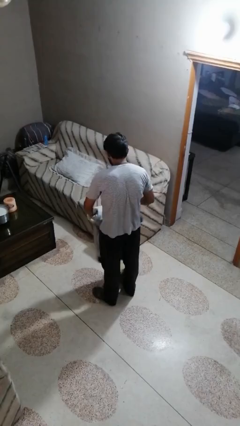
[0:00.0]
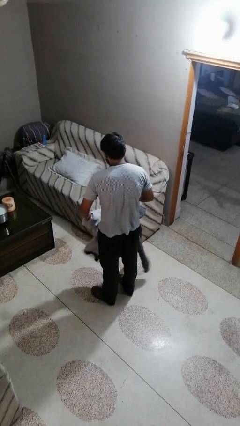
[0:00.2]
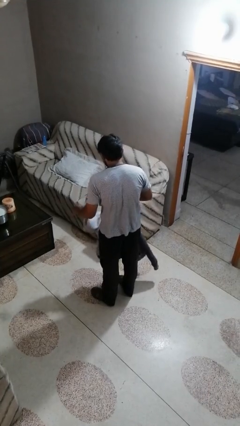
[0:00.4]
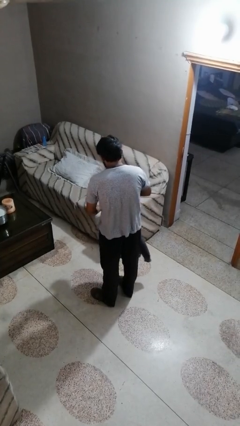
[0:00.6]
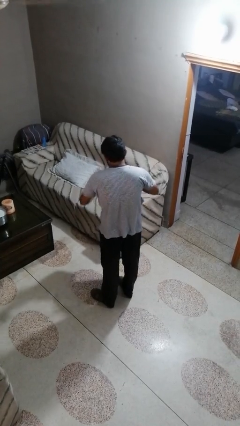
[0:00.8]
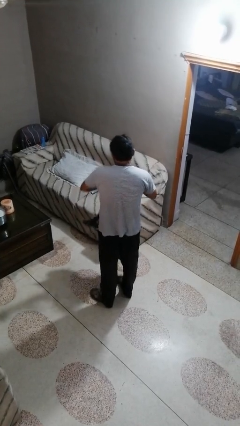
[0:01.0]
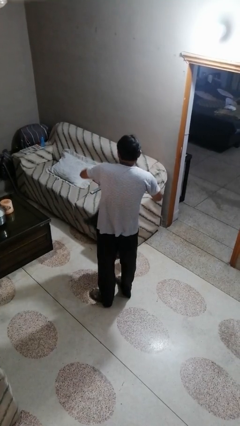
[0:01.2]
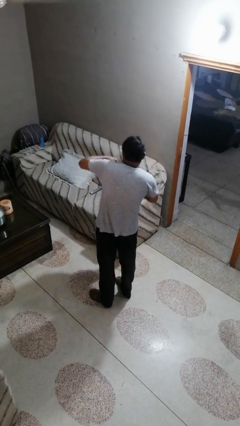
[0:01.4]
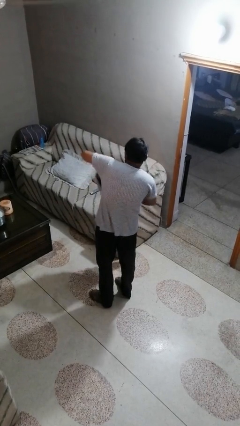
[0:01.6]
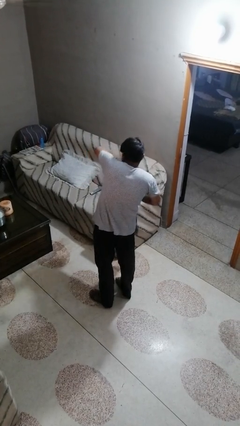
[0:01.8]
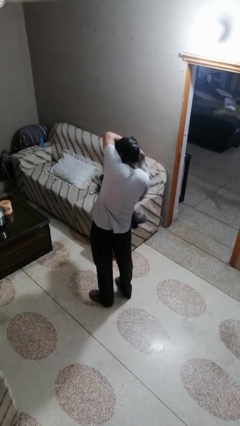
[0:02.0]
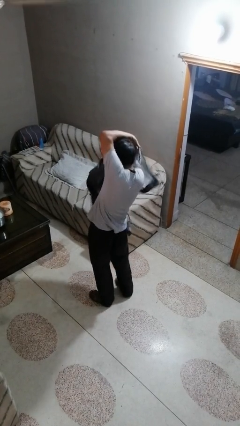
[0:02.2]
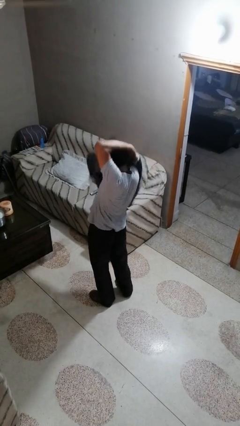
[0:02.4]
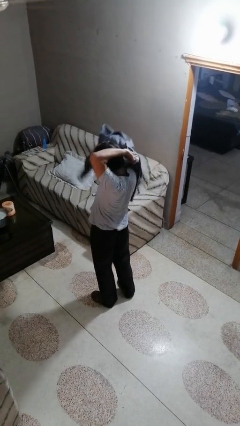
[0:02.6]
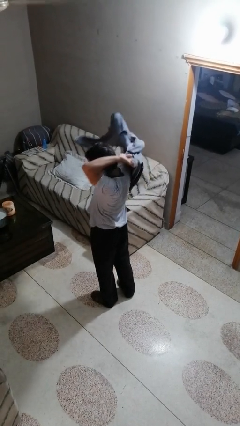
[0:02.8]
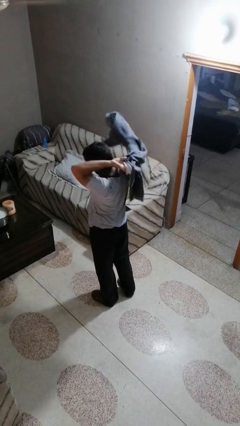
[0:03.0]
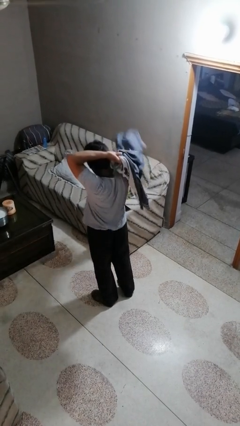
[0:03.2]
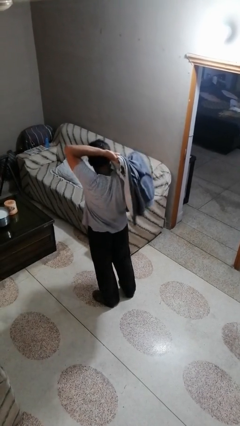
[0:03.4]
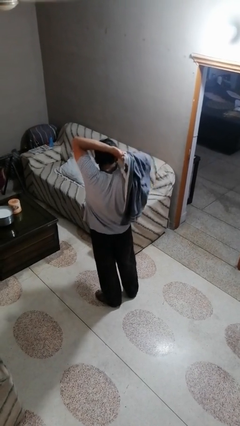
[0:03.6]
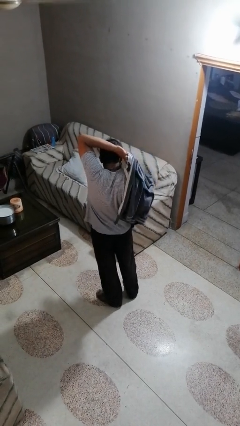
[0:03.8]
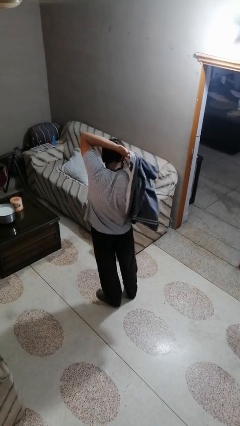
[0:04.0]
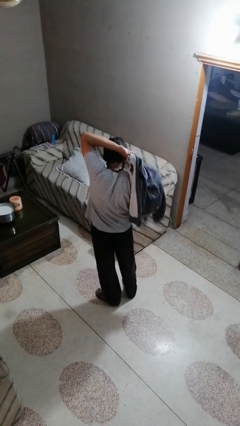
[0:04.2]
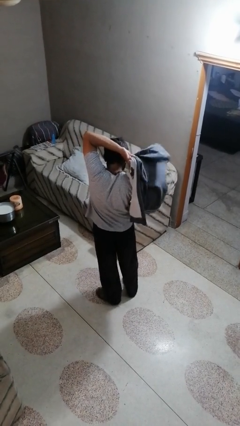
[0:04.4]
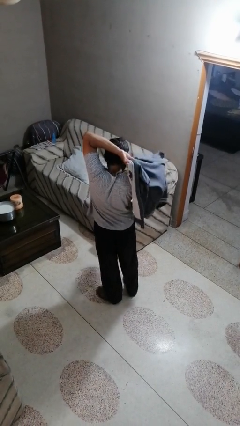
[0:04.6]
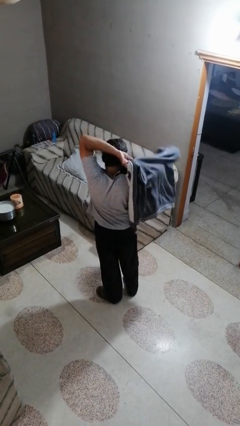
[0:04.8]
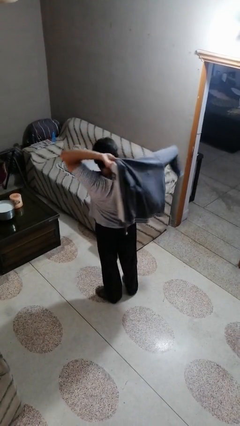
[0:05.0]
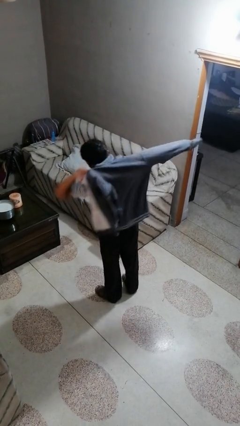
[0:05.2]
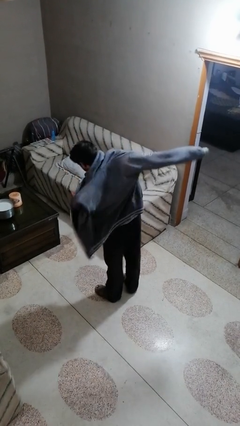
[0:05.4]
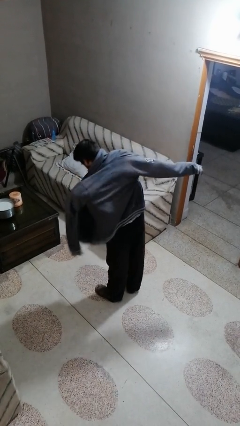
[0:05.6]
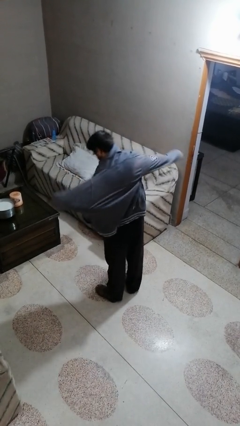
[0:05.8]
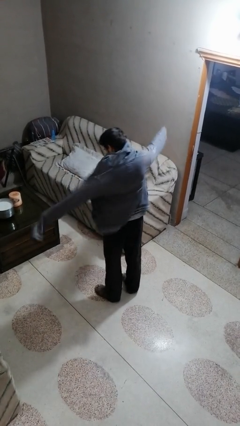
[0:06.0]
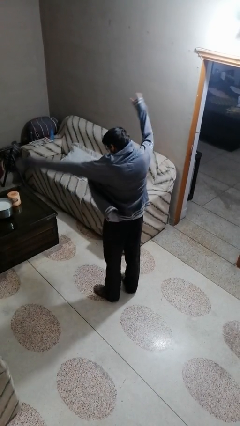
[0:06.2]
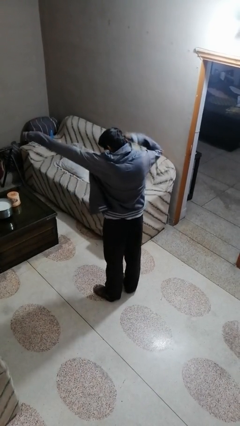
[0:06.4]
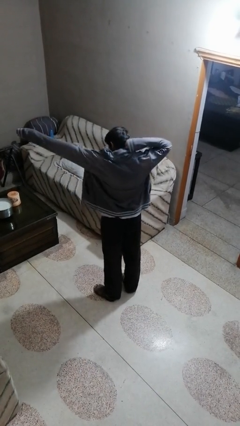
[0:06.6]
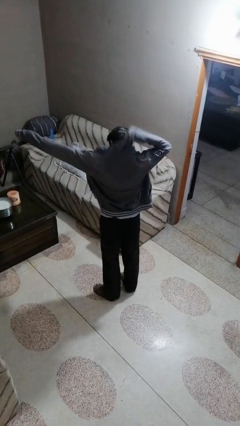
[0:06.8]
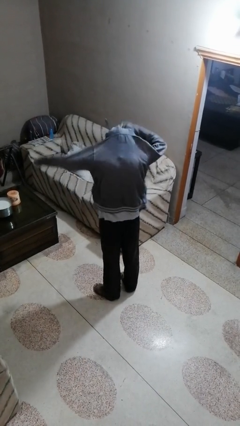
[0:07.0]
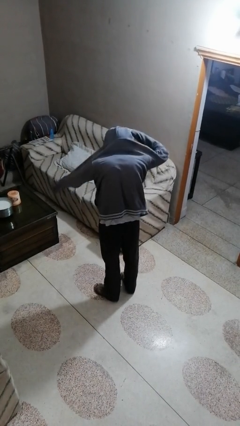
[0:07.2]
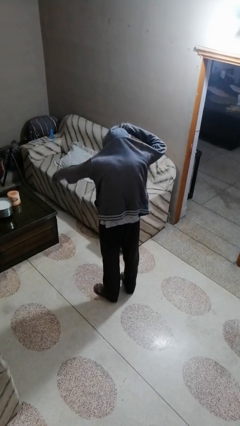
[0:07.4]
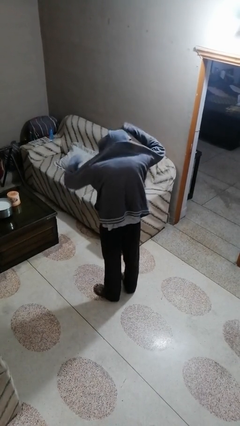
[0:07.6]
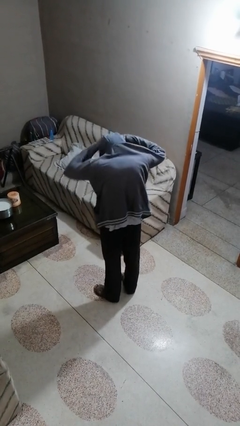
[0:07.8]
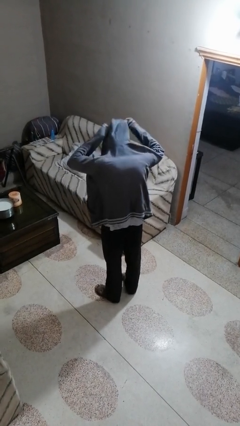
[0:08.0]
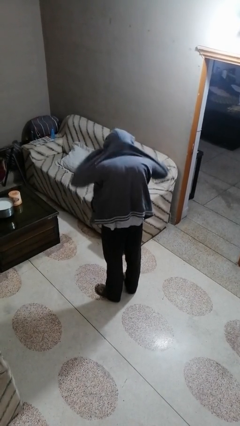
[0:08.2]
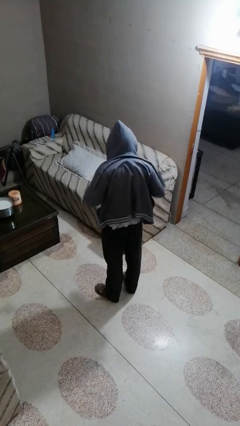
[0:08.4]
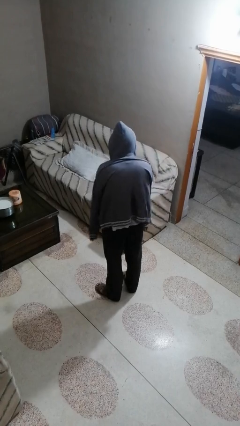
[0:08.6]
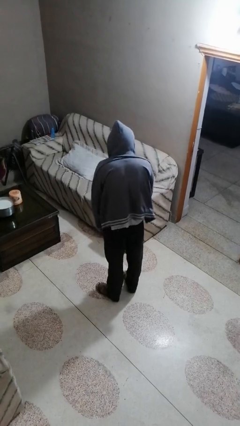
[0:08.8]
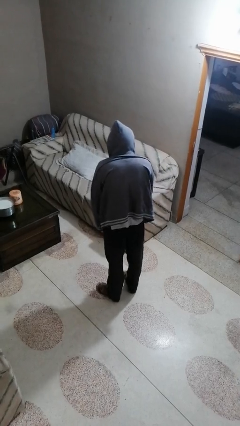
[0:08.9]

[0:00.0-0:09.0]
person puts on hoodie

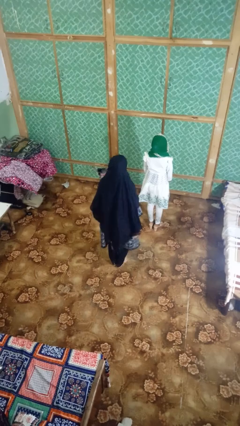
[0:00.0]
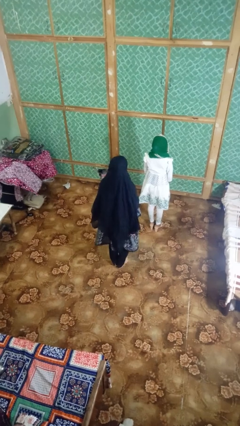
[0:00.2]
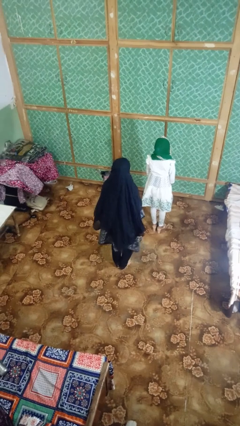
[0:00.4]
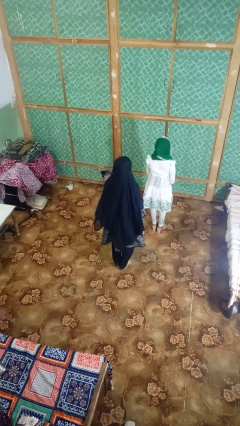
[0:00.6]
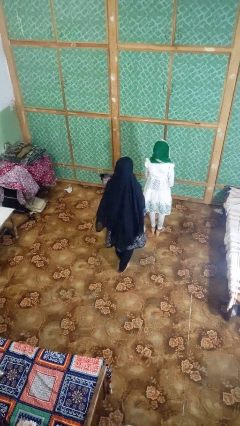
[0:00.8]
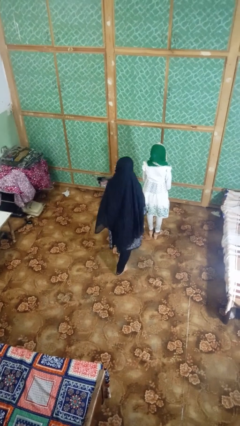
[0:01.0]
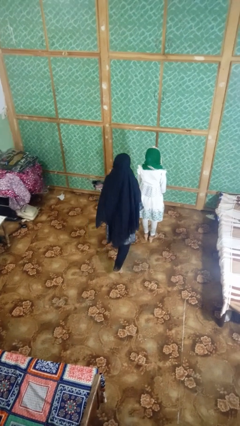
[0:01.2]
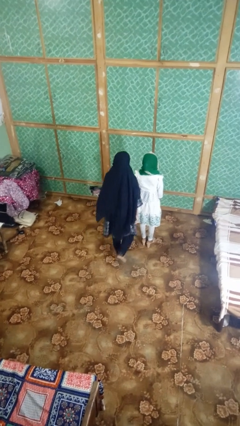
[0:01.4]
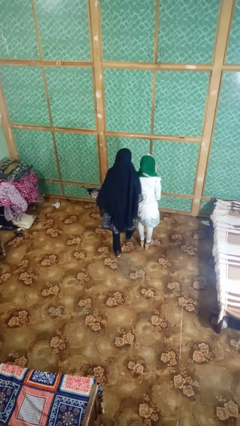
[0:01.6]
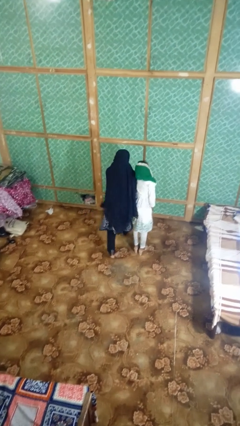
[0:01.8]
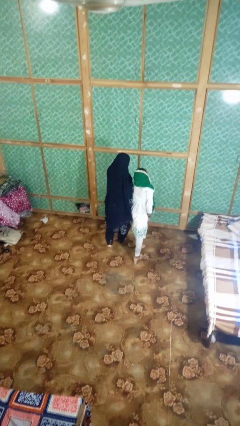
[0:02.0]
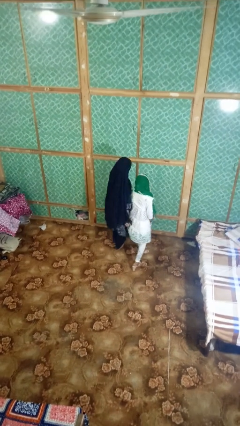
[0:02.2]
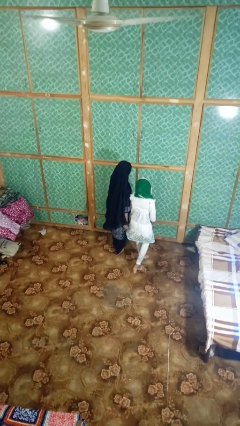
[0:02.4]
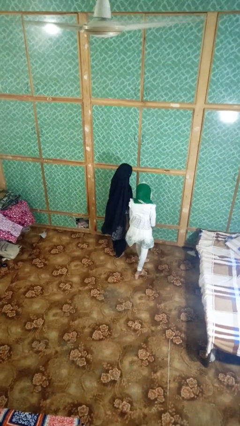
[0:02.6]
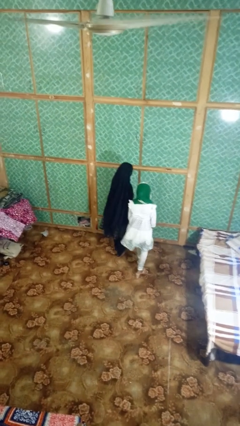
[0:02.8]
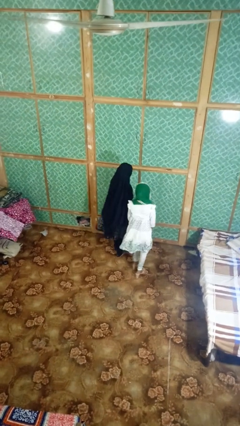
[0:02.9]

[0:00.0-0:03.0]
person bumps into person

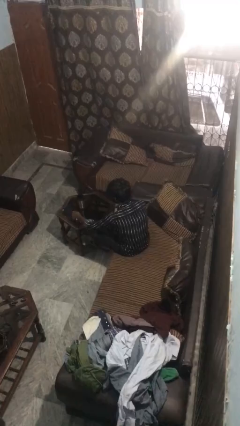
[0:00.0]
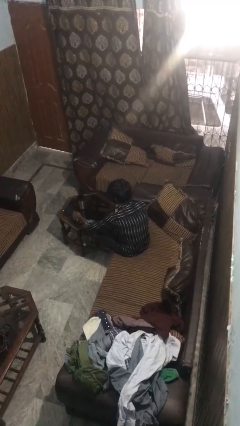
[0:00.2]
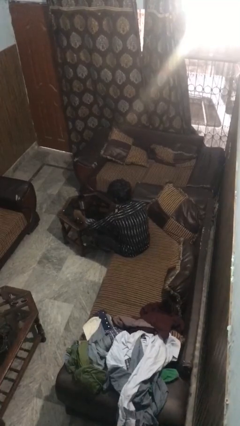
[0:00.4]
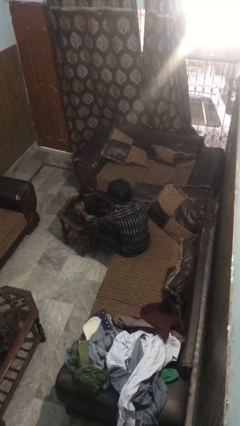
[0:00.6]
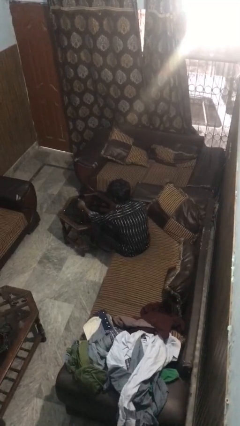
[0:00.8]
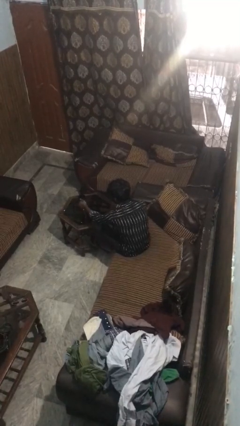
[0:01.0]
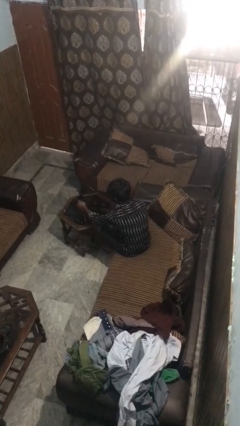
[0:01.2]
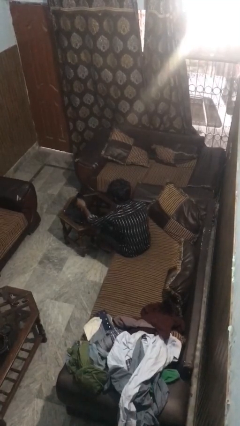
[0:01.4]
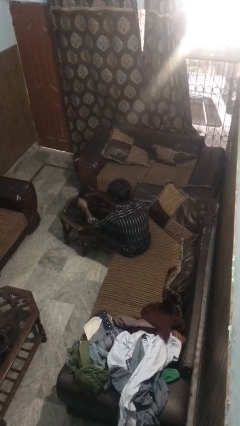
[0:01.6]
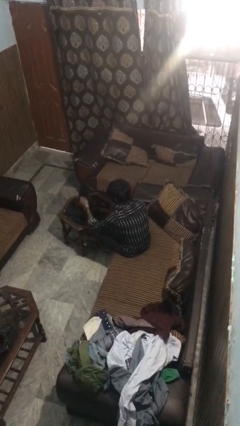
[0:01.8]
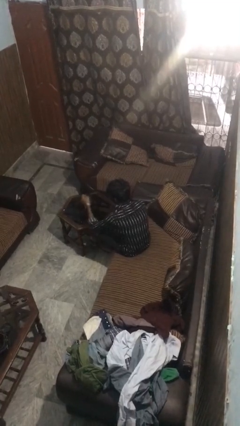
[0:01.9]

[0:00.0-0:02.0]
person picks up object from table

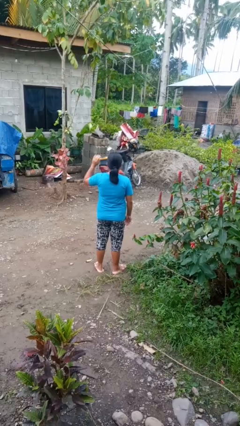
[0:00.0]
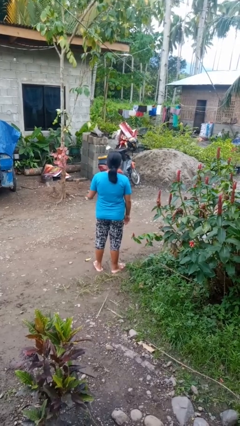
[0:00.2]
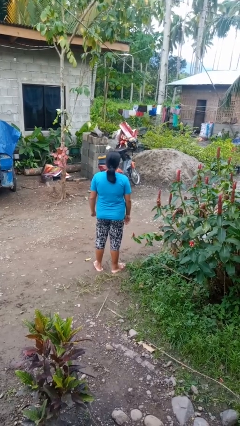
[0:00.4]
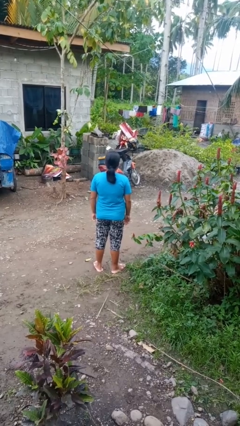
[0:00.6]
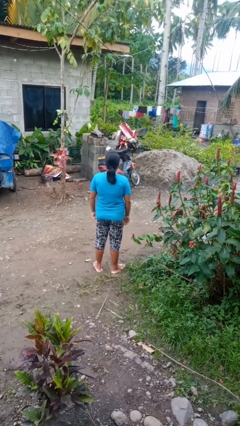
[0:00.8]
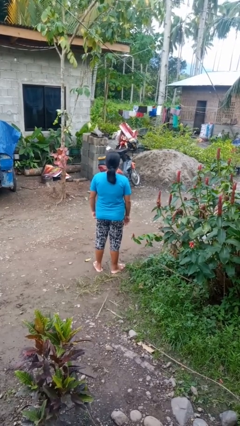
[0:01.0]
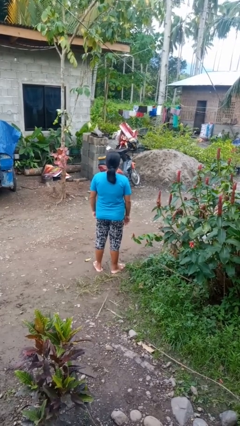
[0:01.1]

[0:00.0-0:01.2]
person gestures lower hand

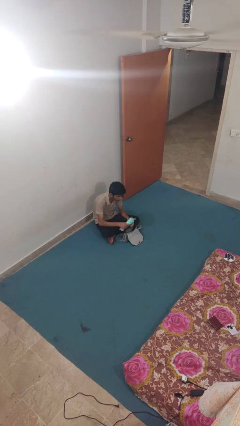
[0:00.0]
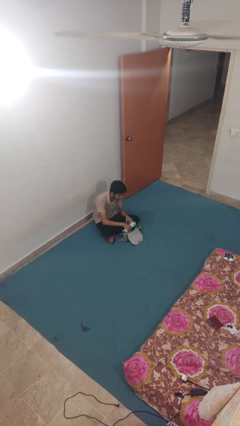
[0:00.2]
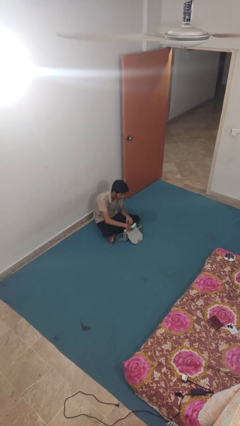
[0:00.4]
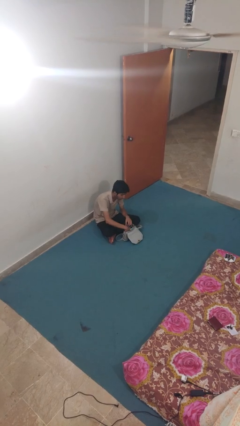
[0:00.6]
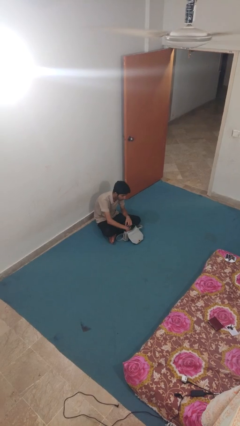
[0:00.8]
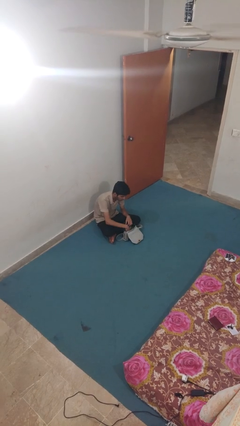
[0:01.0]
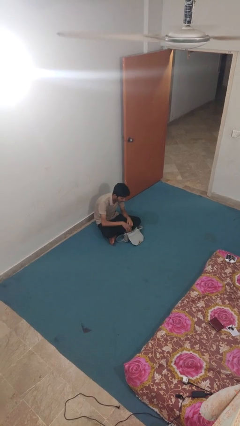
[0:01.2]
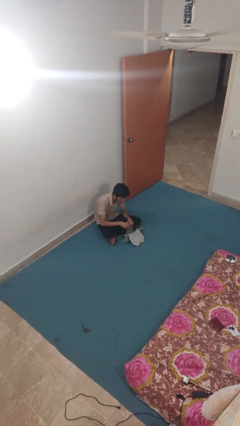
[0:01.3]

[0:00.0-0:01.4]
person puts object into purse

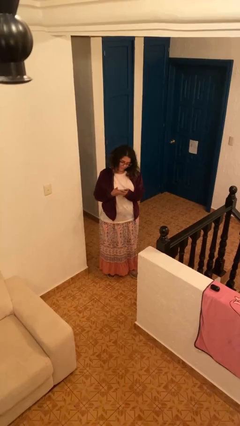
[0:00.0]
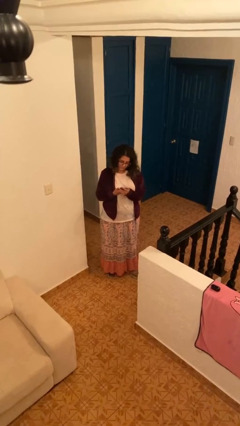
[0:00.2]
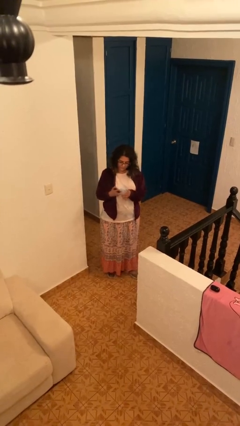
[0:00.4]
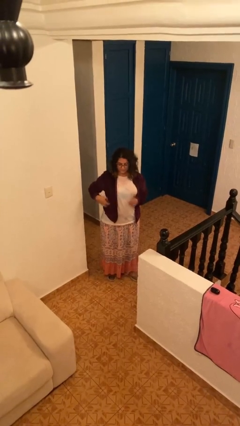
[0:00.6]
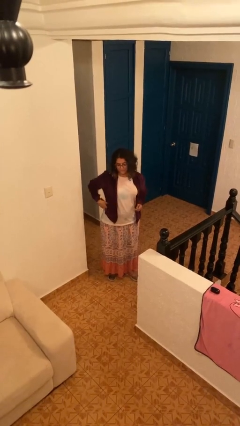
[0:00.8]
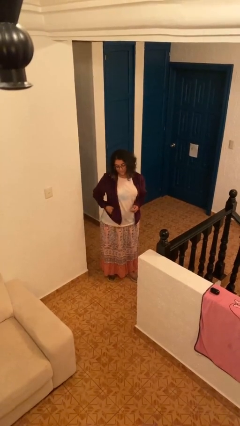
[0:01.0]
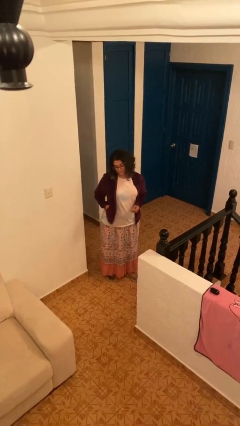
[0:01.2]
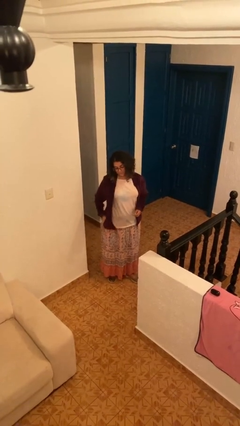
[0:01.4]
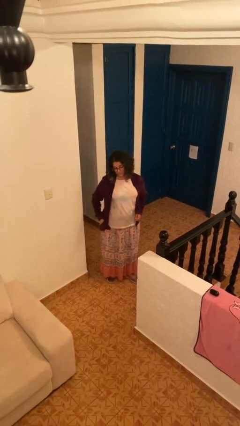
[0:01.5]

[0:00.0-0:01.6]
person puts phone into pocket
